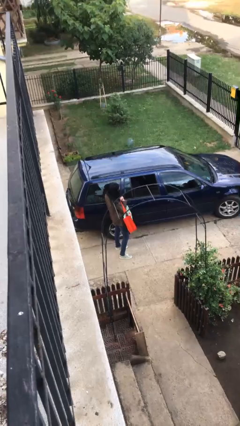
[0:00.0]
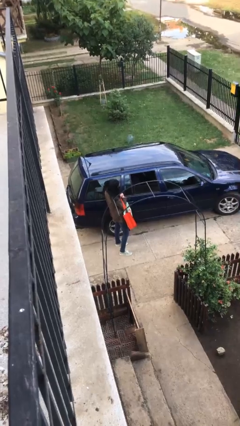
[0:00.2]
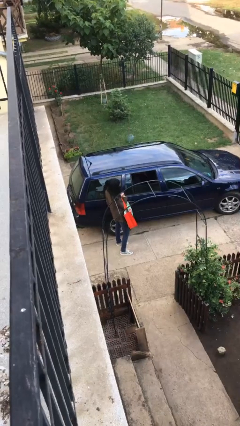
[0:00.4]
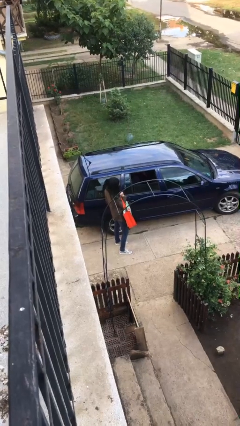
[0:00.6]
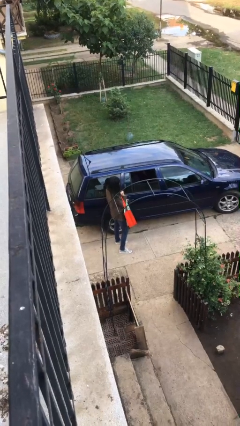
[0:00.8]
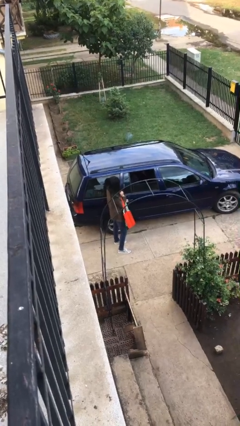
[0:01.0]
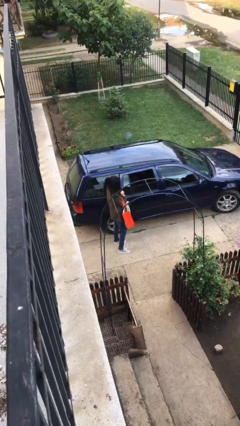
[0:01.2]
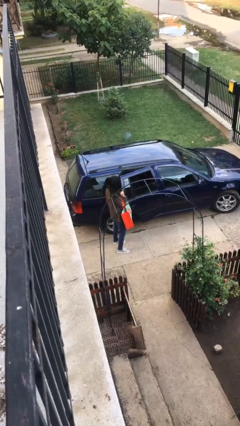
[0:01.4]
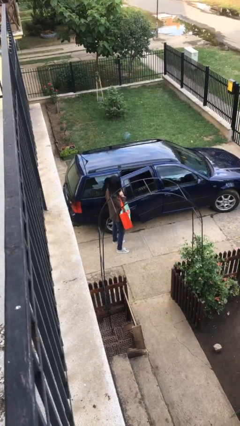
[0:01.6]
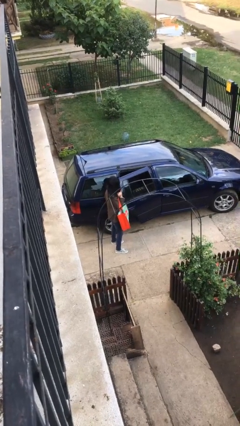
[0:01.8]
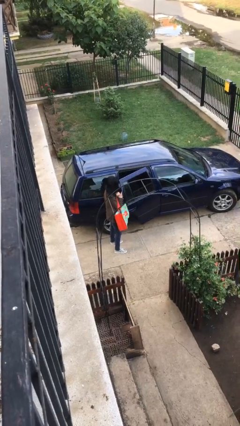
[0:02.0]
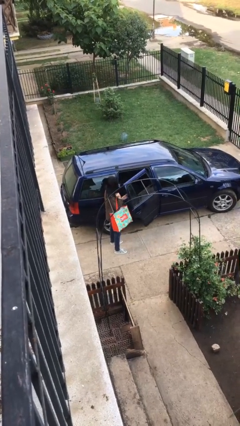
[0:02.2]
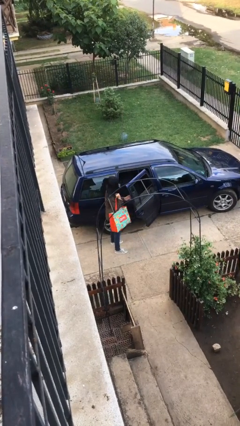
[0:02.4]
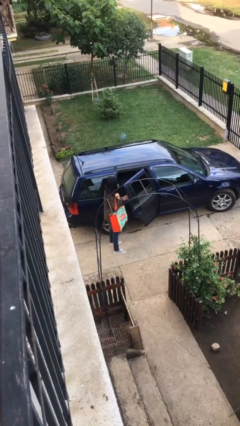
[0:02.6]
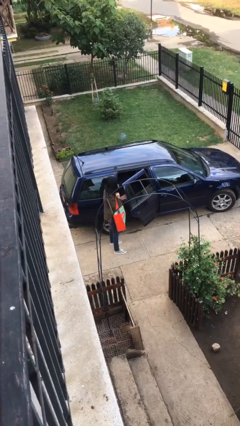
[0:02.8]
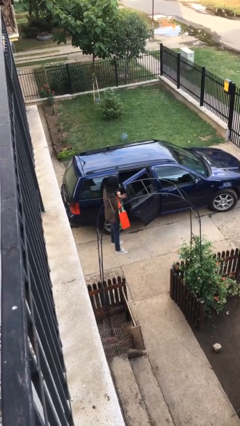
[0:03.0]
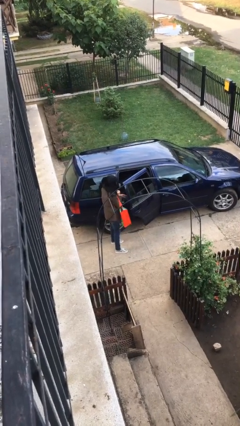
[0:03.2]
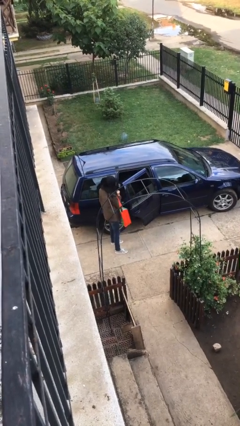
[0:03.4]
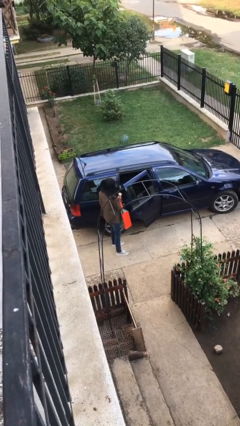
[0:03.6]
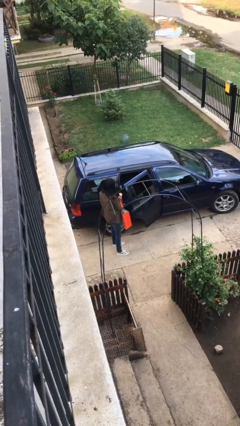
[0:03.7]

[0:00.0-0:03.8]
person opens car door

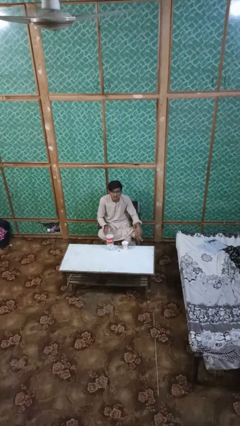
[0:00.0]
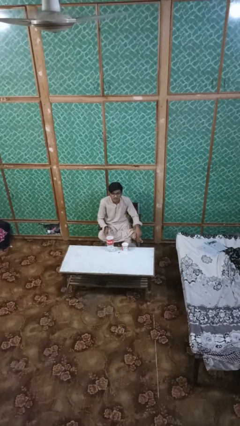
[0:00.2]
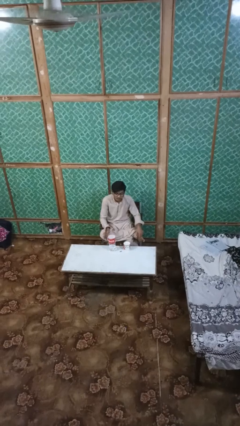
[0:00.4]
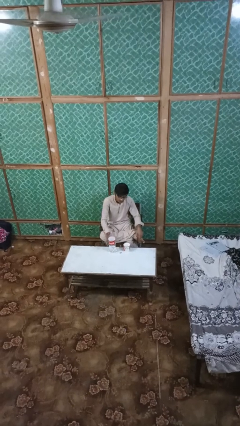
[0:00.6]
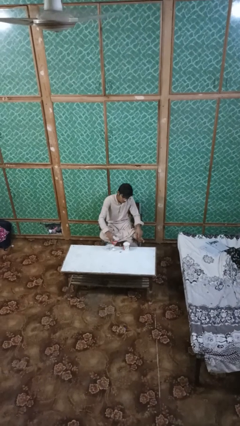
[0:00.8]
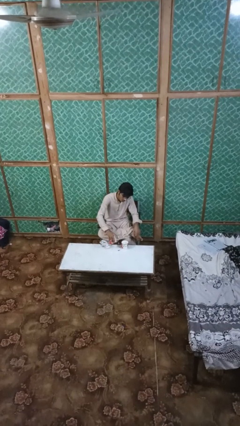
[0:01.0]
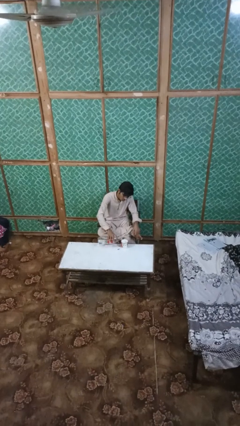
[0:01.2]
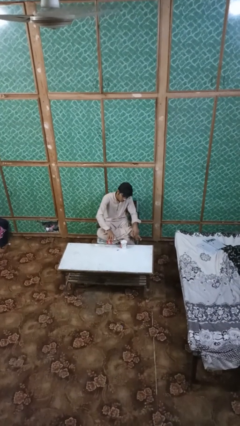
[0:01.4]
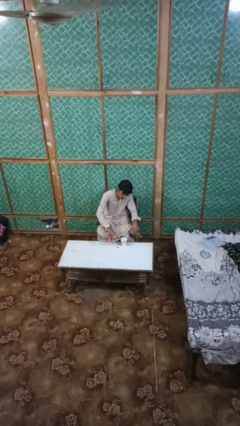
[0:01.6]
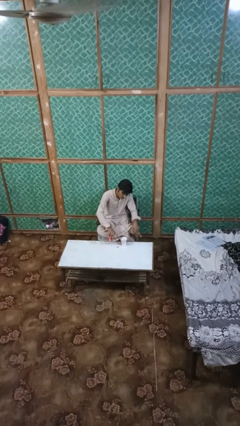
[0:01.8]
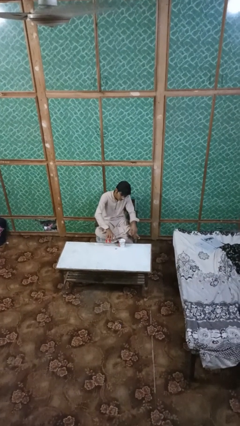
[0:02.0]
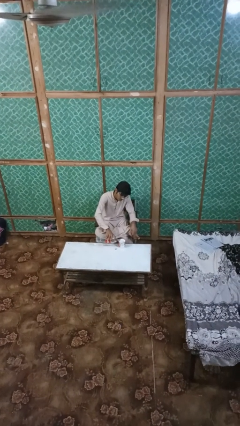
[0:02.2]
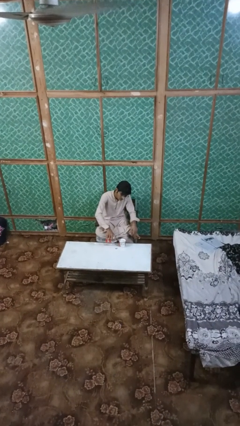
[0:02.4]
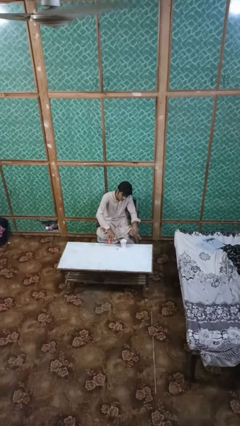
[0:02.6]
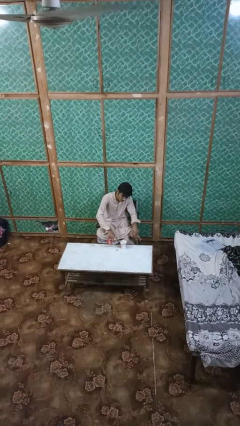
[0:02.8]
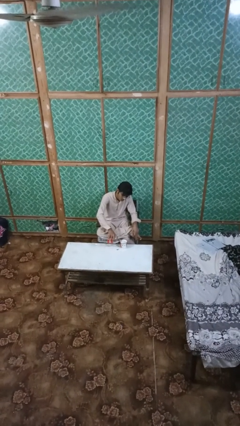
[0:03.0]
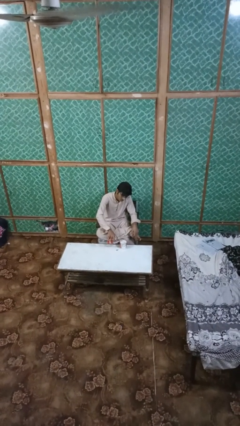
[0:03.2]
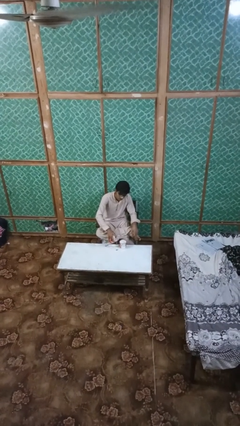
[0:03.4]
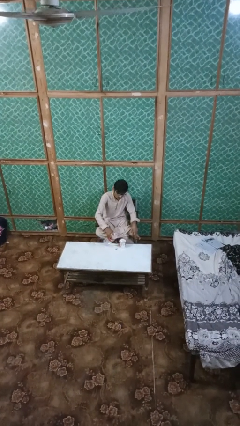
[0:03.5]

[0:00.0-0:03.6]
person pours liquid into cup

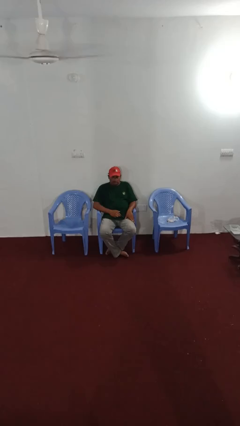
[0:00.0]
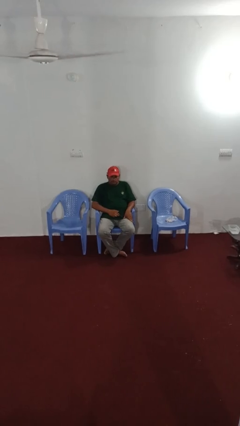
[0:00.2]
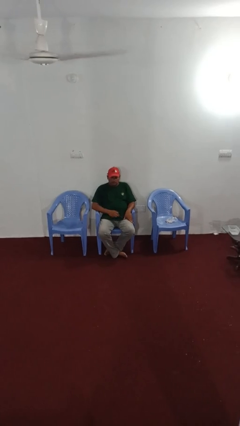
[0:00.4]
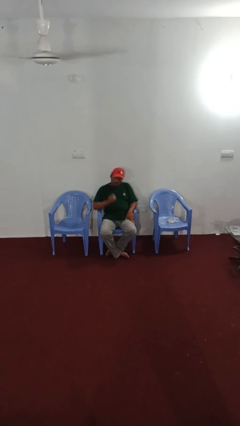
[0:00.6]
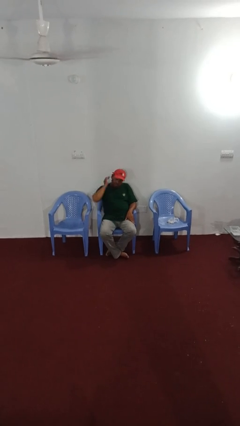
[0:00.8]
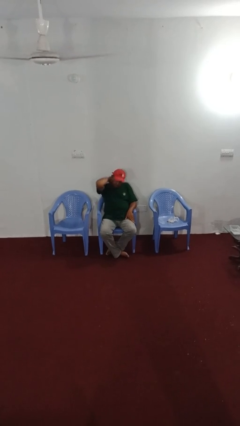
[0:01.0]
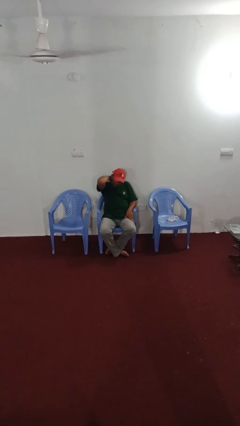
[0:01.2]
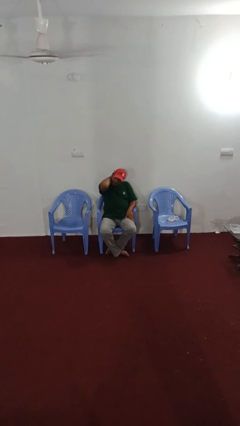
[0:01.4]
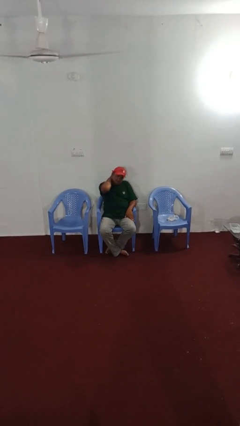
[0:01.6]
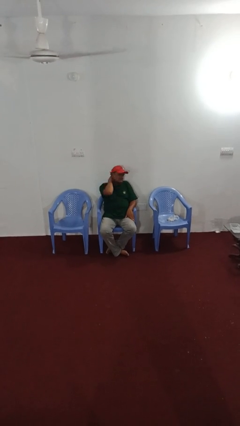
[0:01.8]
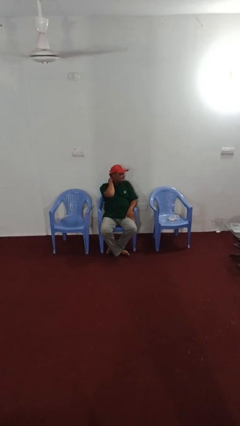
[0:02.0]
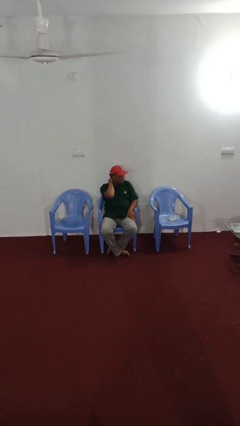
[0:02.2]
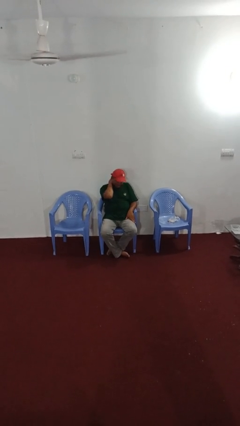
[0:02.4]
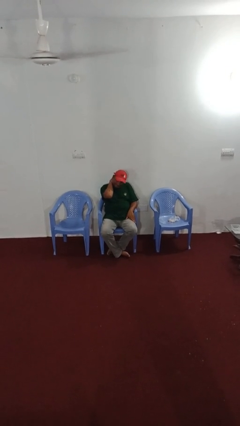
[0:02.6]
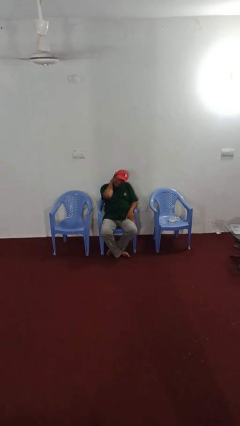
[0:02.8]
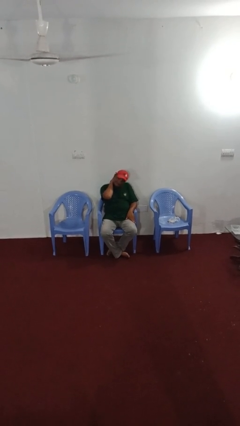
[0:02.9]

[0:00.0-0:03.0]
person rubs neck

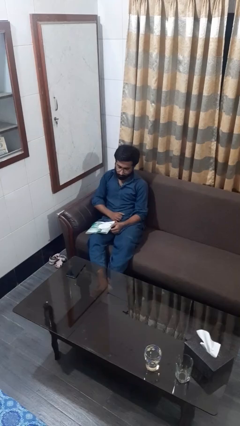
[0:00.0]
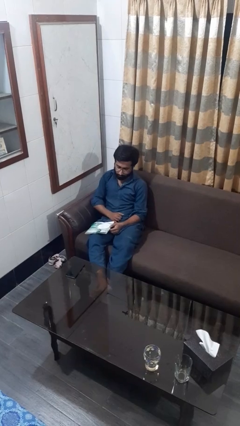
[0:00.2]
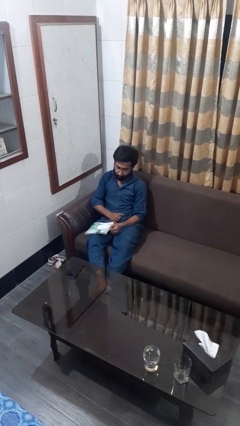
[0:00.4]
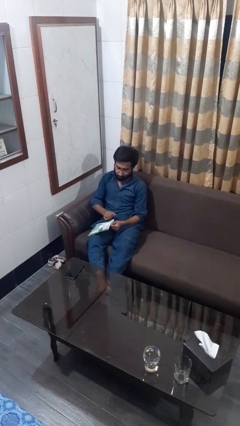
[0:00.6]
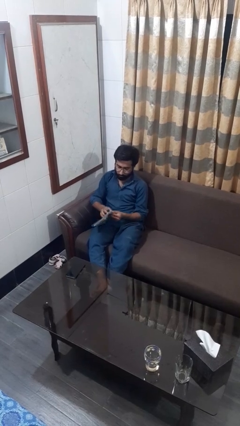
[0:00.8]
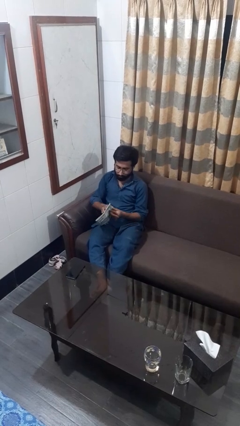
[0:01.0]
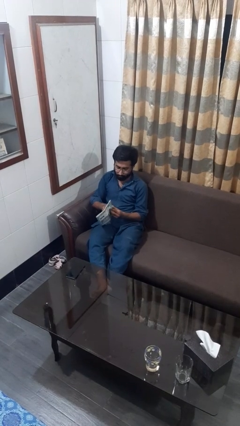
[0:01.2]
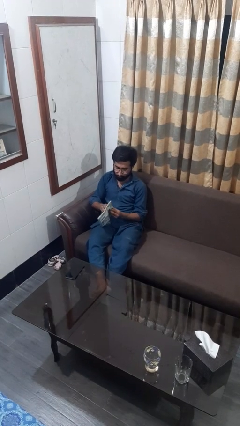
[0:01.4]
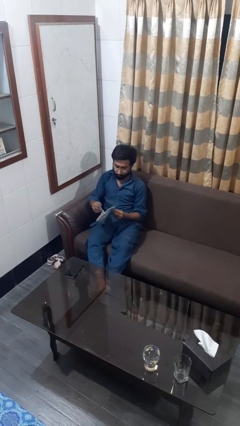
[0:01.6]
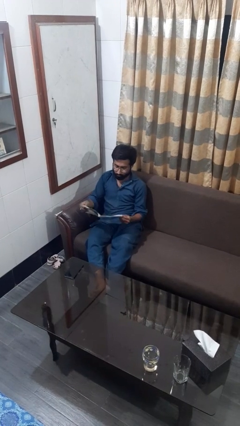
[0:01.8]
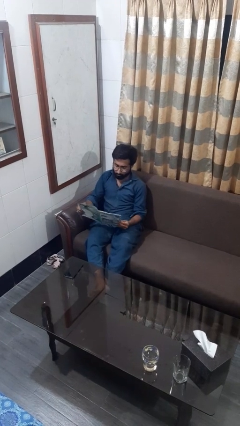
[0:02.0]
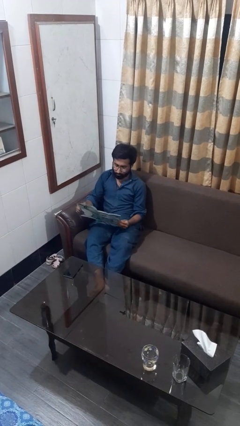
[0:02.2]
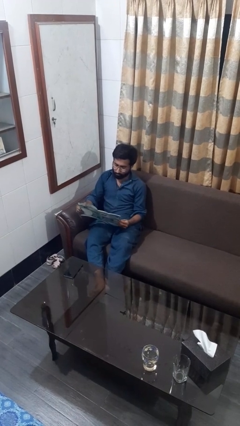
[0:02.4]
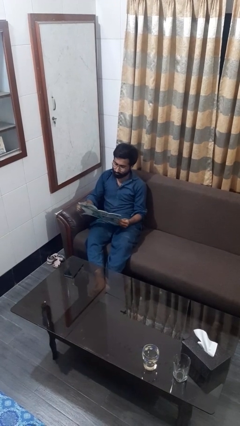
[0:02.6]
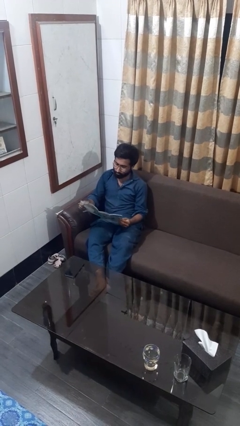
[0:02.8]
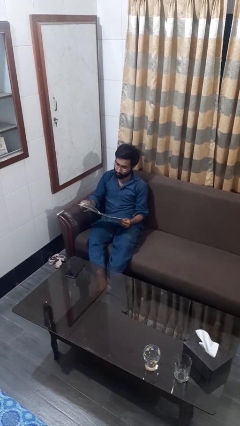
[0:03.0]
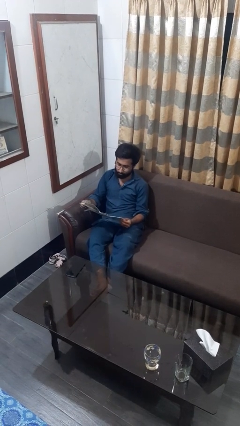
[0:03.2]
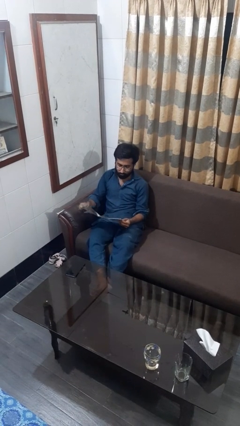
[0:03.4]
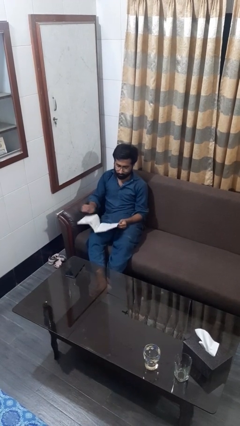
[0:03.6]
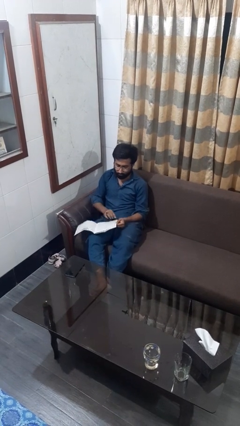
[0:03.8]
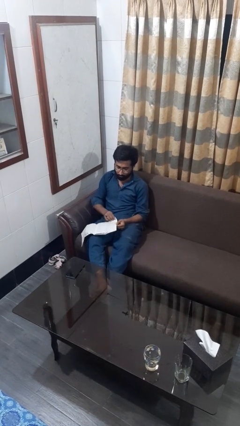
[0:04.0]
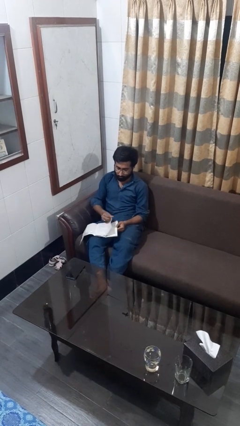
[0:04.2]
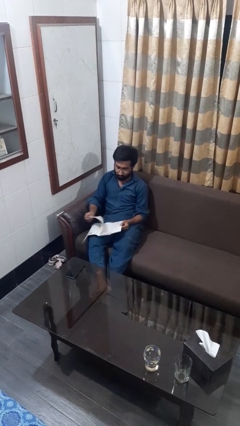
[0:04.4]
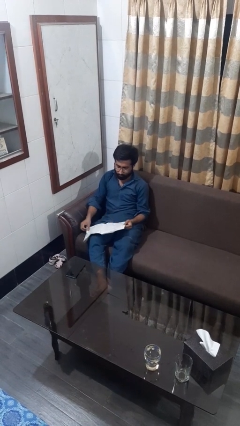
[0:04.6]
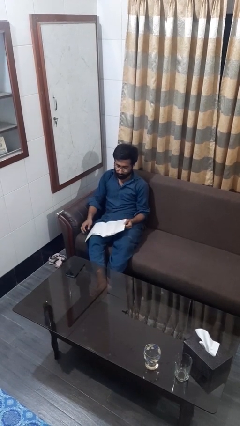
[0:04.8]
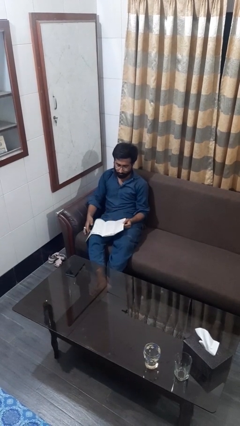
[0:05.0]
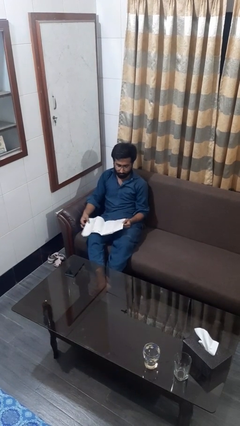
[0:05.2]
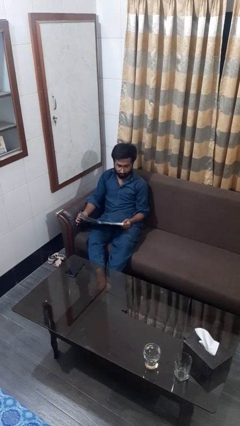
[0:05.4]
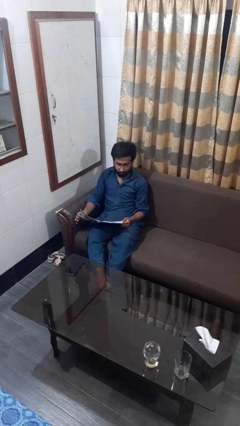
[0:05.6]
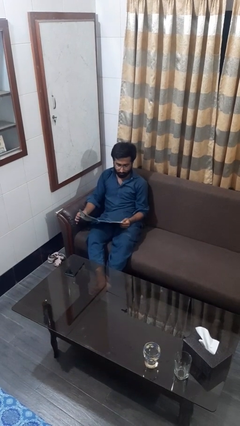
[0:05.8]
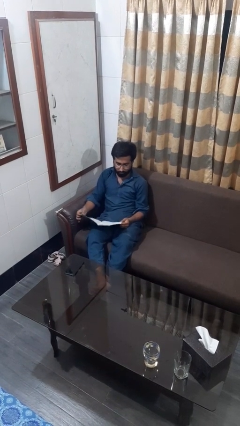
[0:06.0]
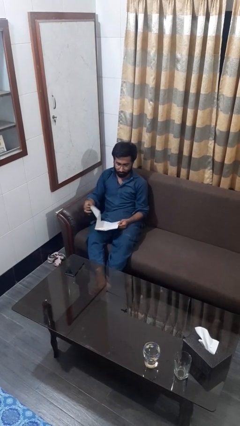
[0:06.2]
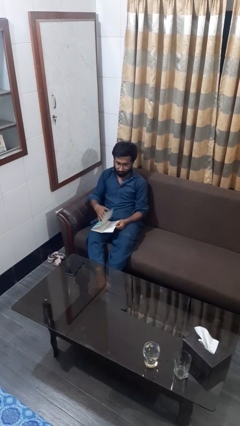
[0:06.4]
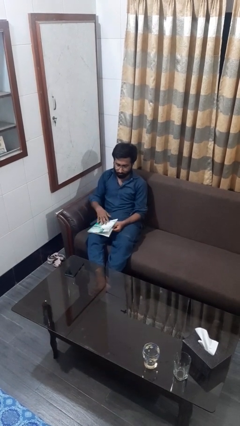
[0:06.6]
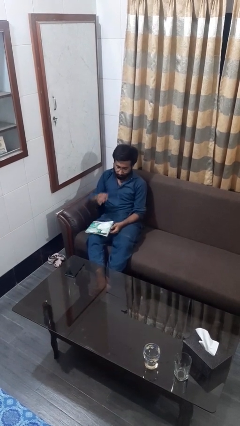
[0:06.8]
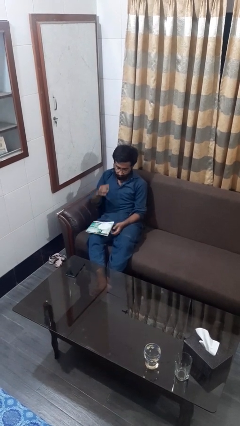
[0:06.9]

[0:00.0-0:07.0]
person reads magazine

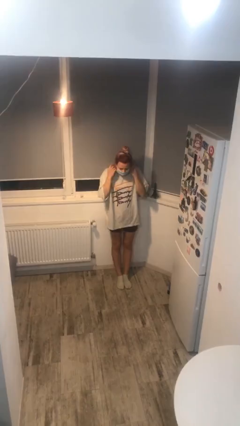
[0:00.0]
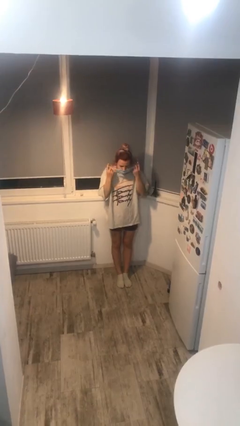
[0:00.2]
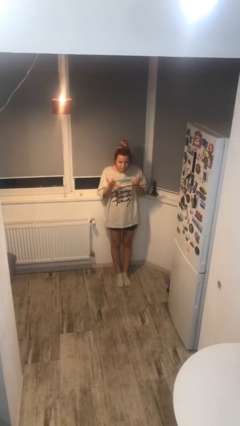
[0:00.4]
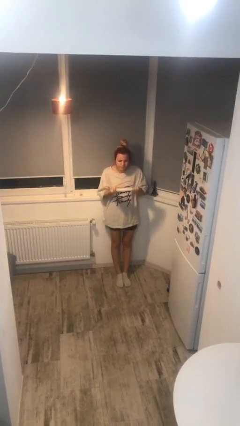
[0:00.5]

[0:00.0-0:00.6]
person takes off facemask
